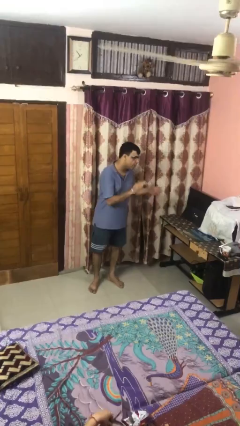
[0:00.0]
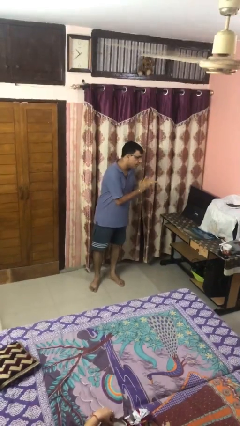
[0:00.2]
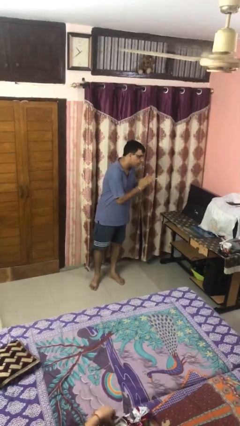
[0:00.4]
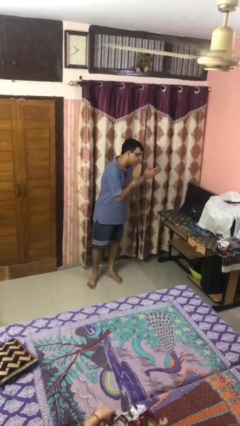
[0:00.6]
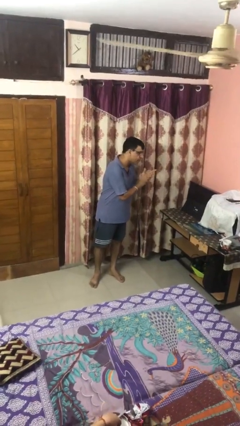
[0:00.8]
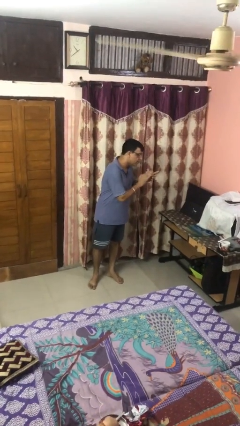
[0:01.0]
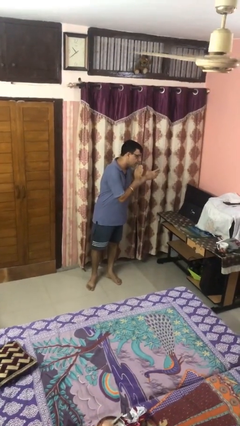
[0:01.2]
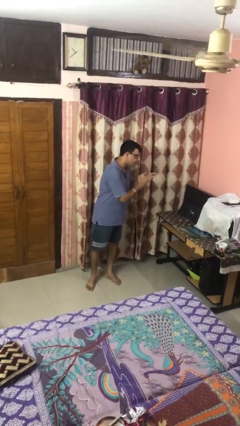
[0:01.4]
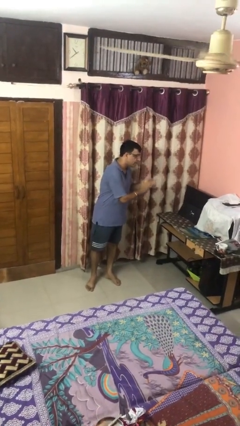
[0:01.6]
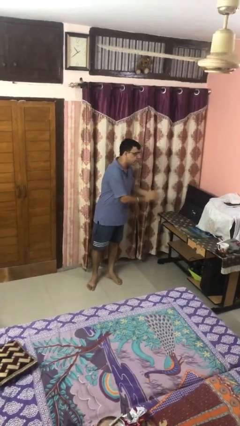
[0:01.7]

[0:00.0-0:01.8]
person claps hands

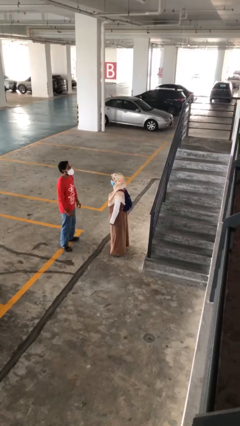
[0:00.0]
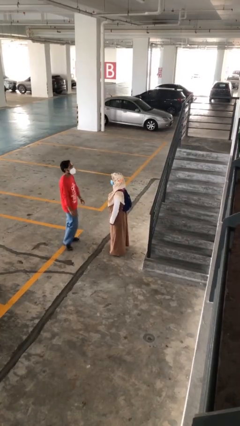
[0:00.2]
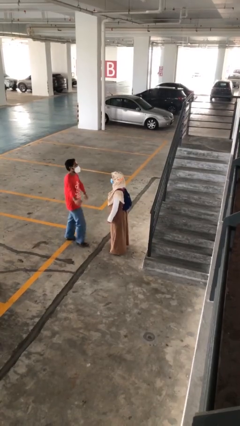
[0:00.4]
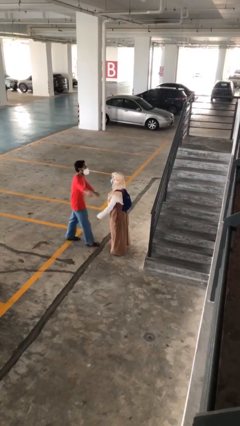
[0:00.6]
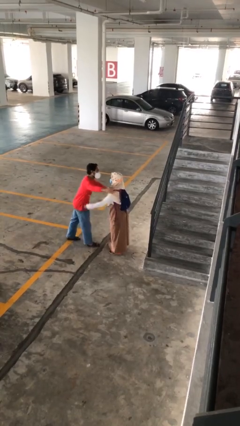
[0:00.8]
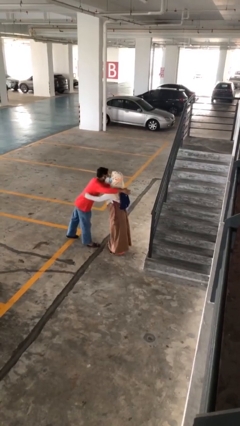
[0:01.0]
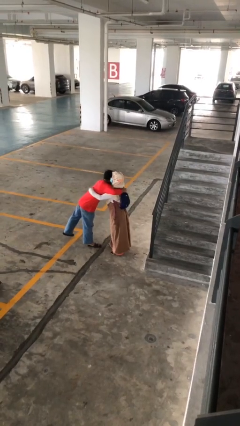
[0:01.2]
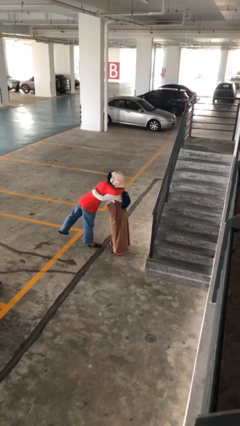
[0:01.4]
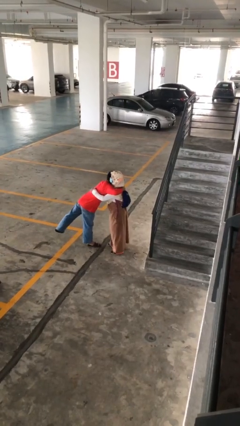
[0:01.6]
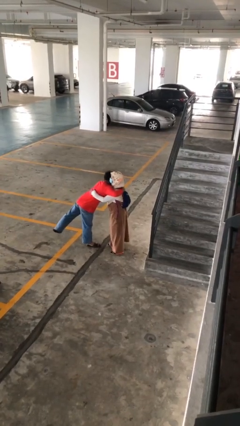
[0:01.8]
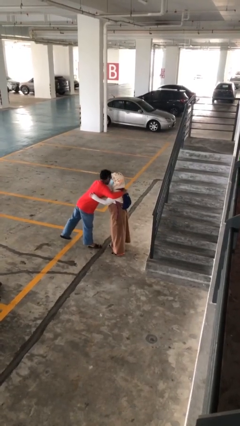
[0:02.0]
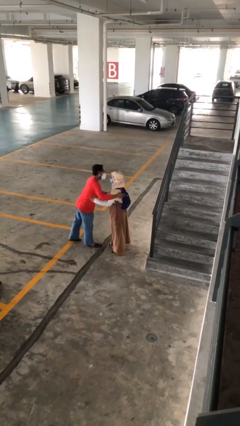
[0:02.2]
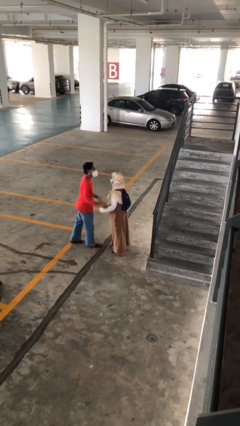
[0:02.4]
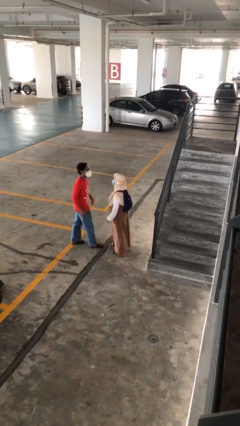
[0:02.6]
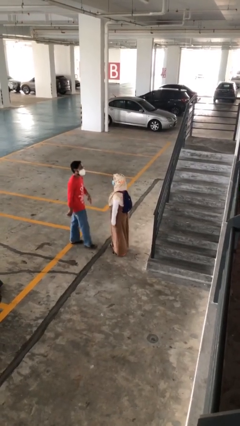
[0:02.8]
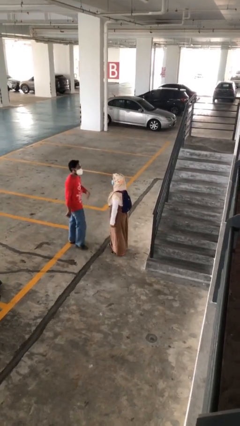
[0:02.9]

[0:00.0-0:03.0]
person embraces person

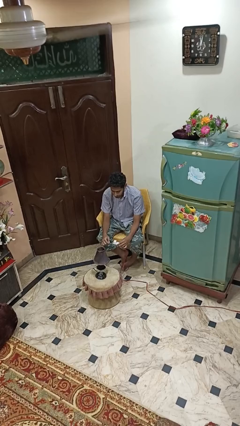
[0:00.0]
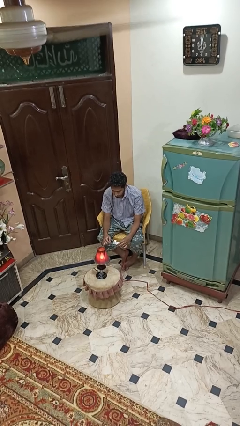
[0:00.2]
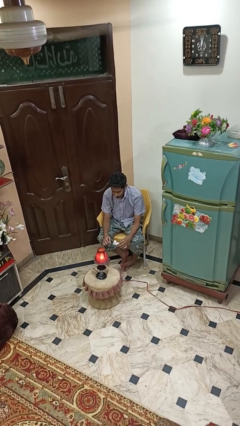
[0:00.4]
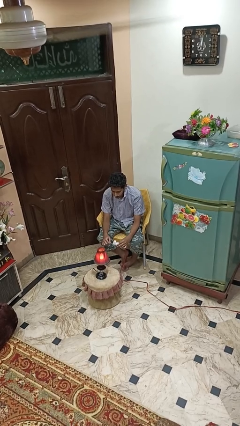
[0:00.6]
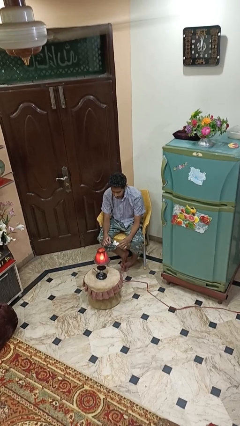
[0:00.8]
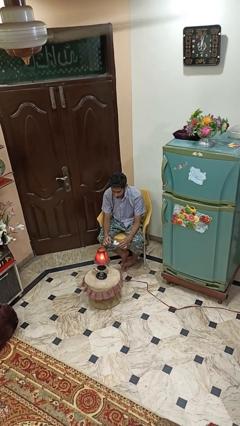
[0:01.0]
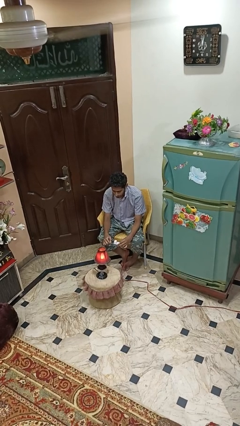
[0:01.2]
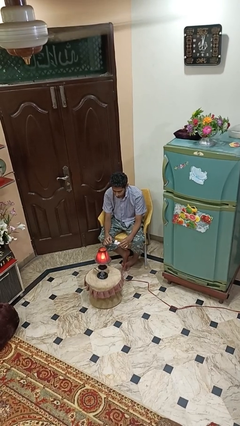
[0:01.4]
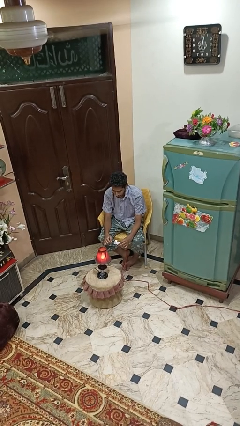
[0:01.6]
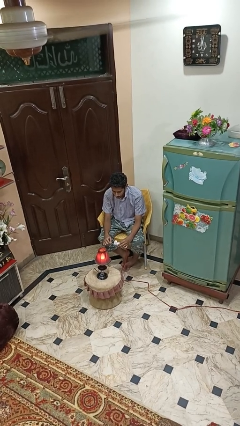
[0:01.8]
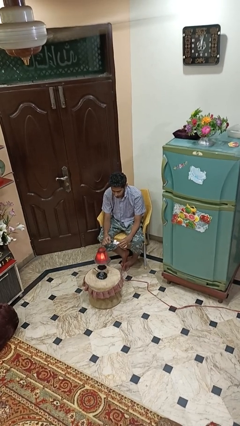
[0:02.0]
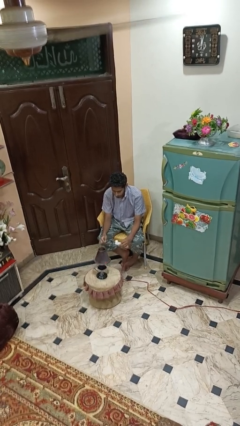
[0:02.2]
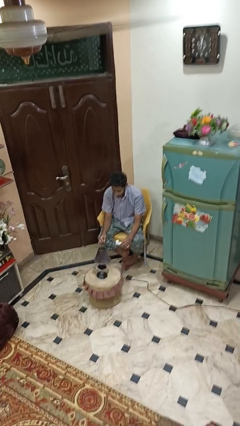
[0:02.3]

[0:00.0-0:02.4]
person turns on lamp

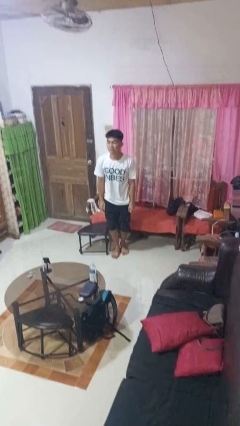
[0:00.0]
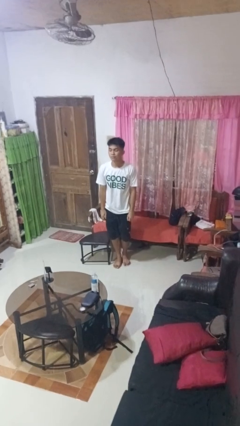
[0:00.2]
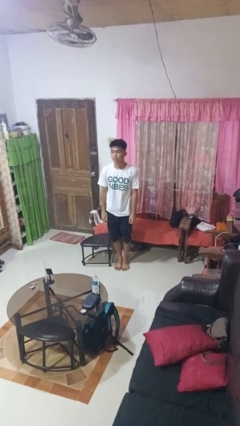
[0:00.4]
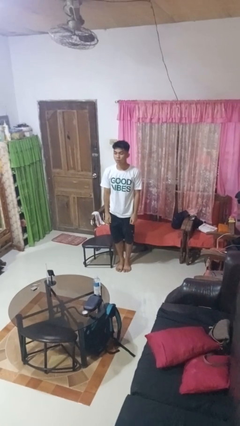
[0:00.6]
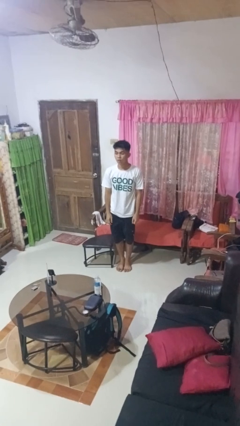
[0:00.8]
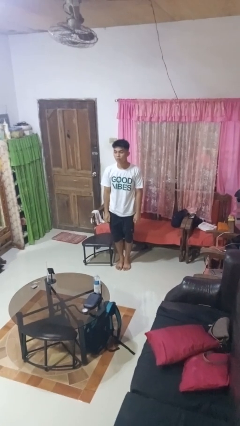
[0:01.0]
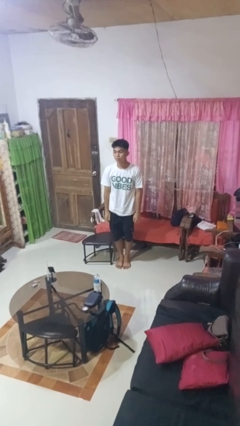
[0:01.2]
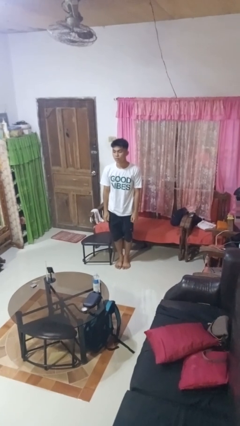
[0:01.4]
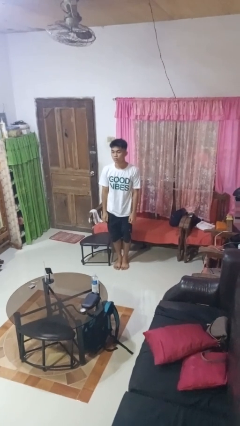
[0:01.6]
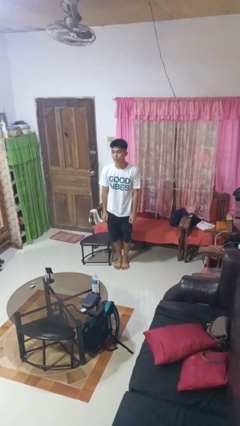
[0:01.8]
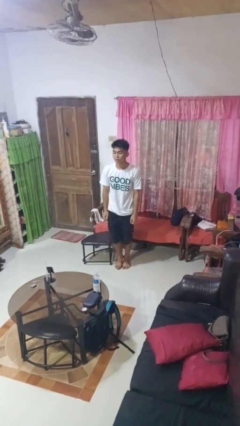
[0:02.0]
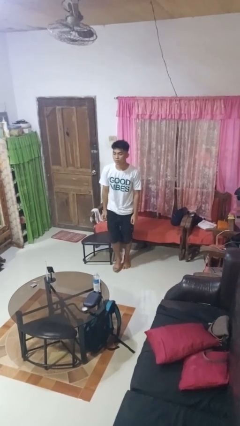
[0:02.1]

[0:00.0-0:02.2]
person stands up from floor

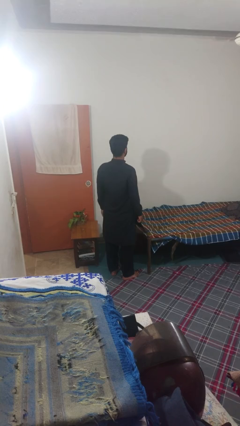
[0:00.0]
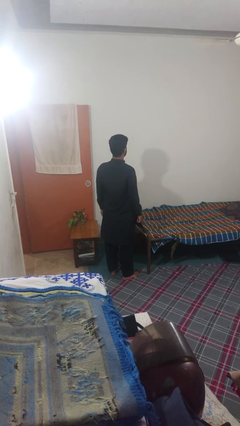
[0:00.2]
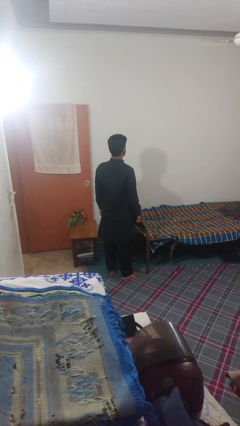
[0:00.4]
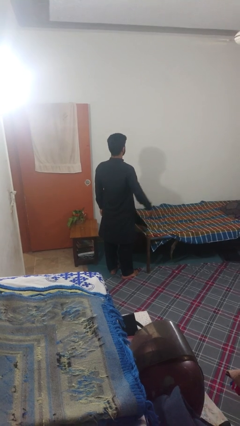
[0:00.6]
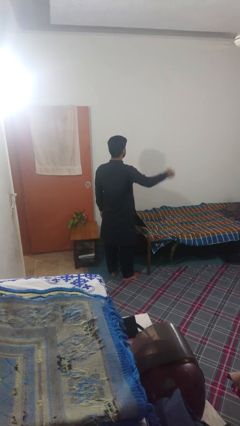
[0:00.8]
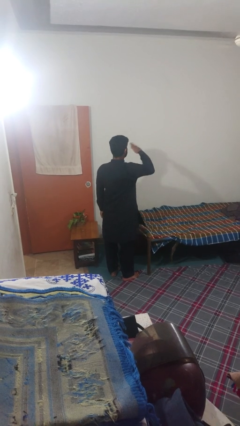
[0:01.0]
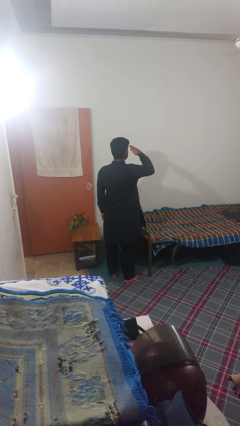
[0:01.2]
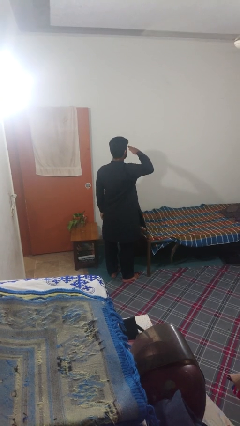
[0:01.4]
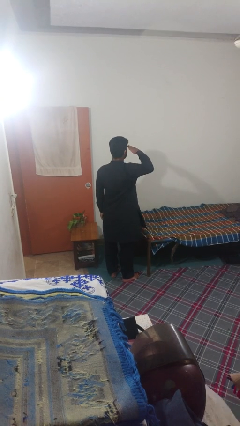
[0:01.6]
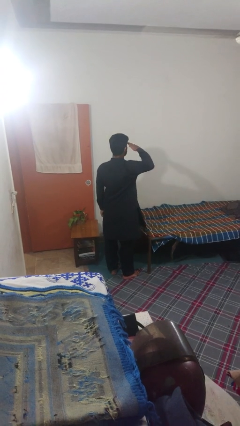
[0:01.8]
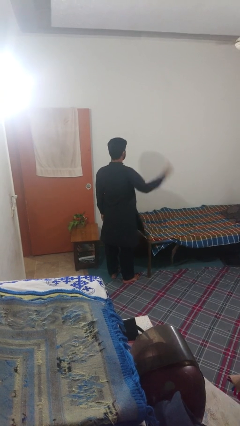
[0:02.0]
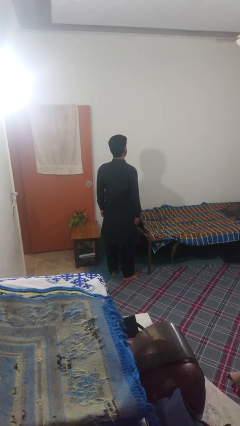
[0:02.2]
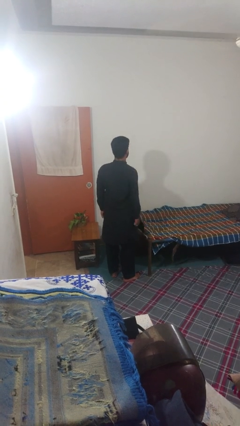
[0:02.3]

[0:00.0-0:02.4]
person salutes

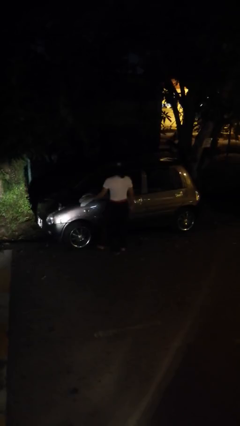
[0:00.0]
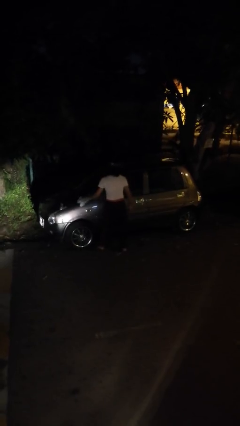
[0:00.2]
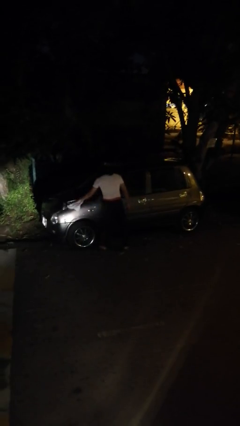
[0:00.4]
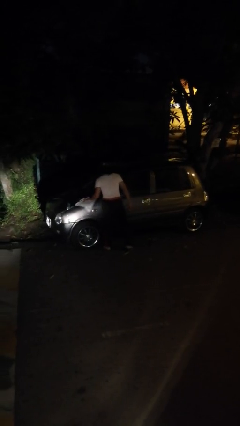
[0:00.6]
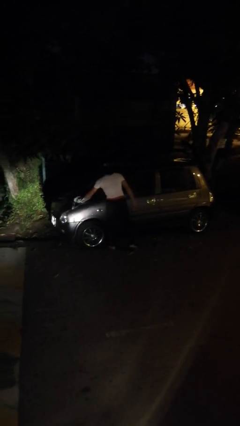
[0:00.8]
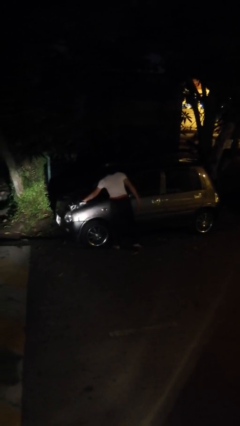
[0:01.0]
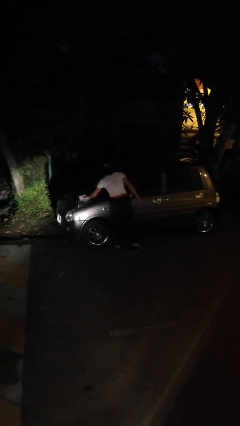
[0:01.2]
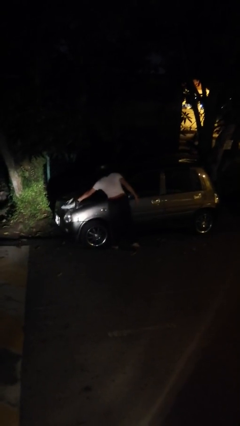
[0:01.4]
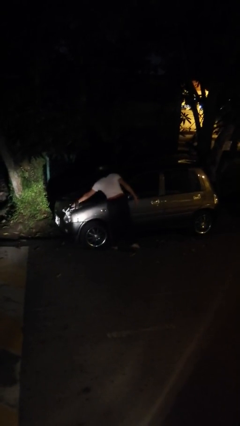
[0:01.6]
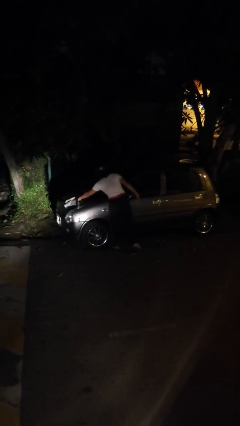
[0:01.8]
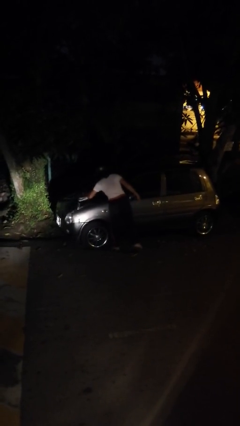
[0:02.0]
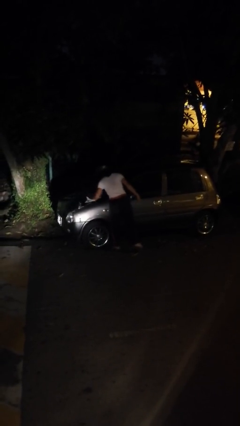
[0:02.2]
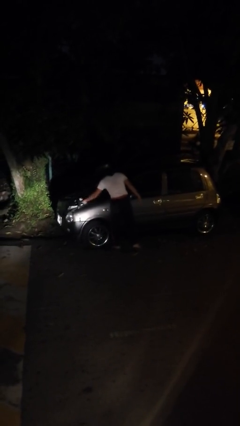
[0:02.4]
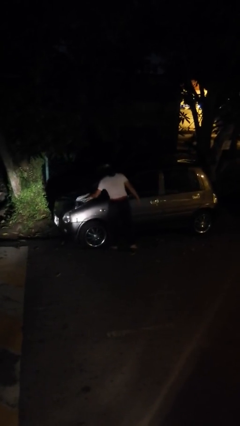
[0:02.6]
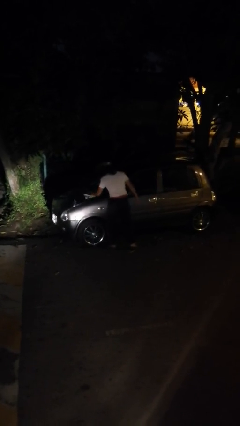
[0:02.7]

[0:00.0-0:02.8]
person polishes car with rag

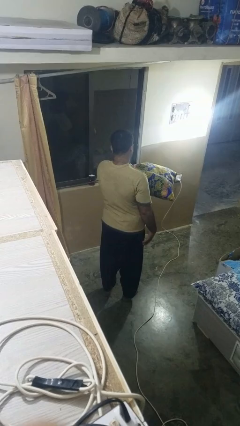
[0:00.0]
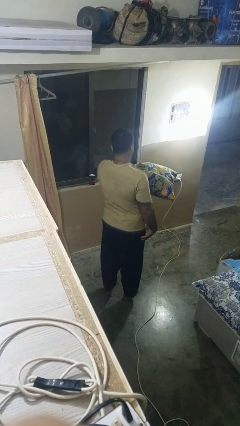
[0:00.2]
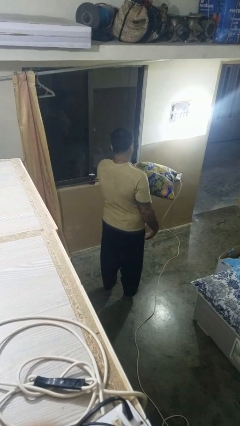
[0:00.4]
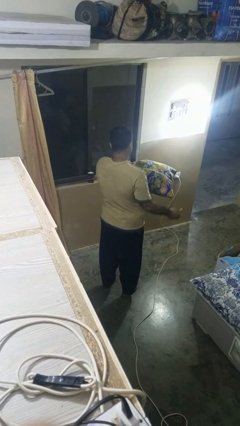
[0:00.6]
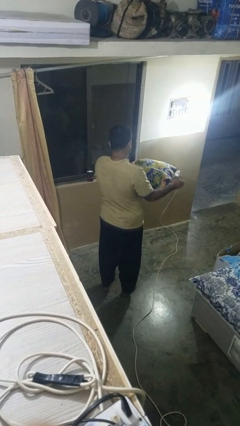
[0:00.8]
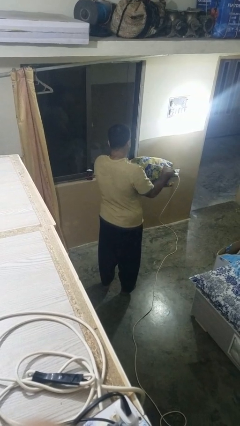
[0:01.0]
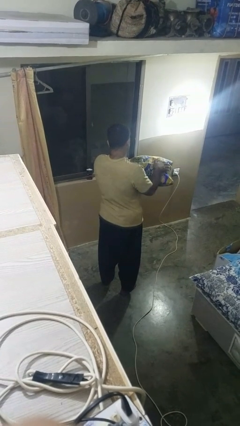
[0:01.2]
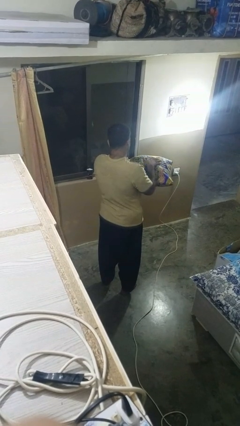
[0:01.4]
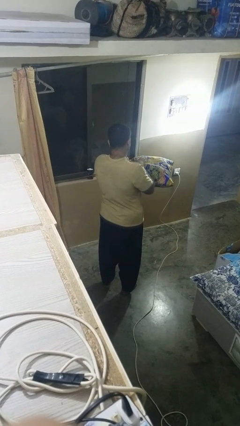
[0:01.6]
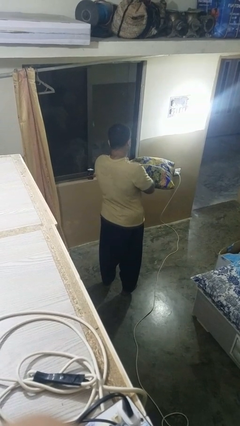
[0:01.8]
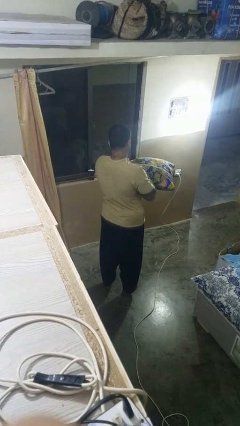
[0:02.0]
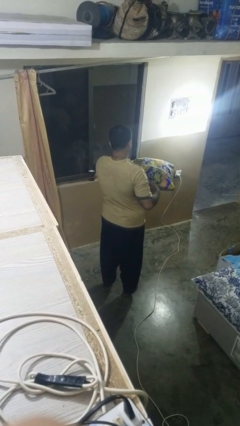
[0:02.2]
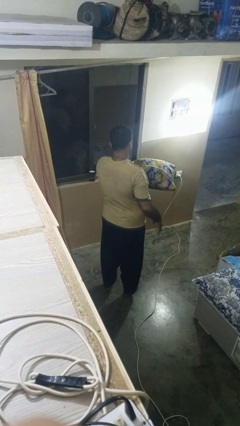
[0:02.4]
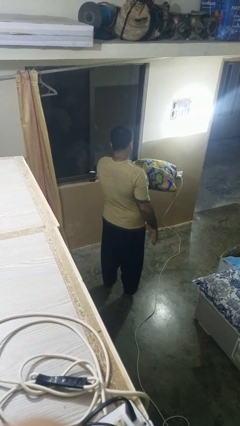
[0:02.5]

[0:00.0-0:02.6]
person waves hand over object
